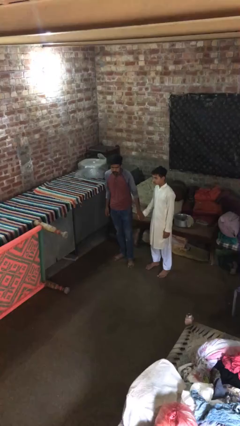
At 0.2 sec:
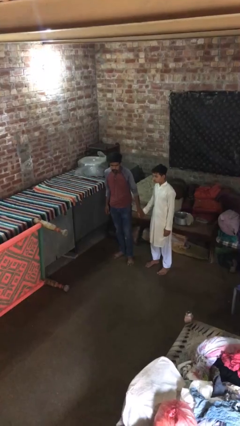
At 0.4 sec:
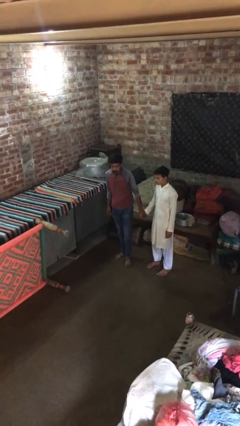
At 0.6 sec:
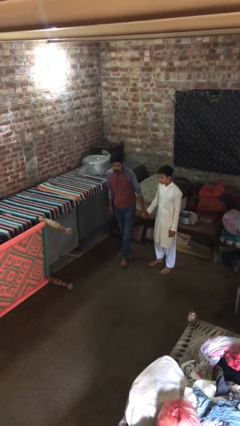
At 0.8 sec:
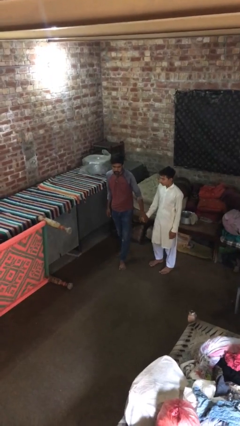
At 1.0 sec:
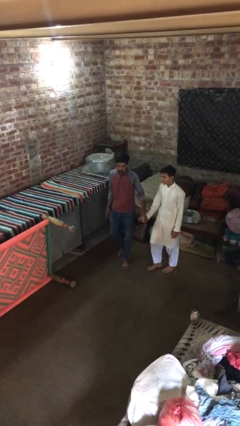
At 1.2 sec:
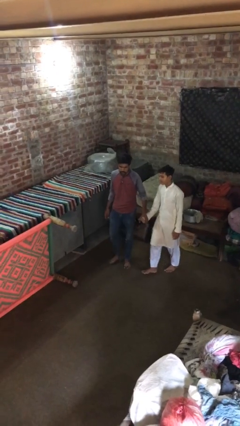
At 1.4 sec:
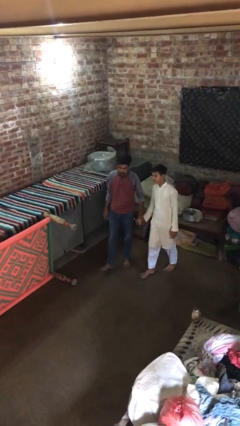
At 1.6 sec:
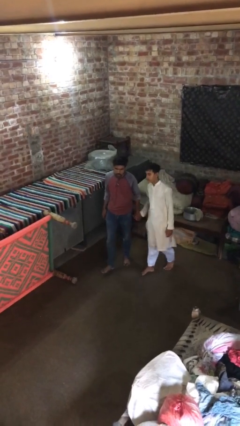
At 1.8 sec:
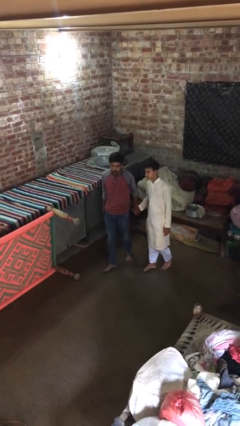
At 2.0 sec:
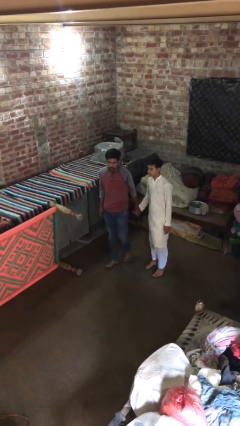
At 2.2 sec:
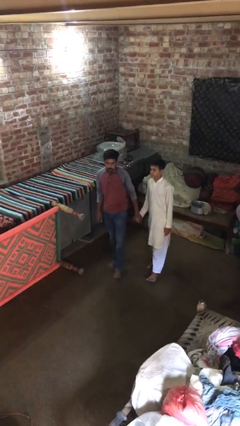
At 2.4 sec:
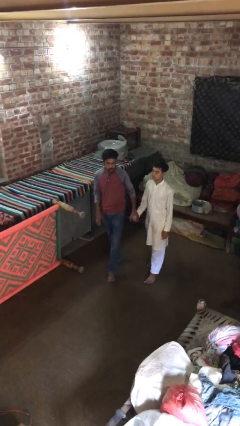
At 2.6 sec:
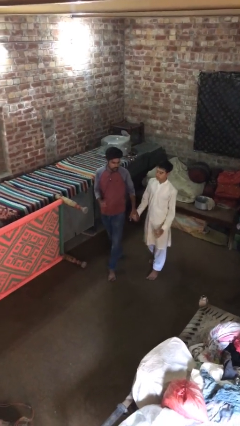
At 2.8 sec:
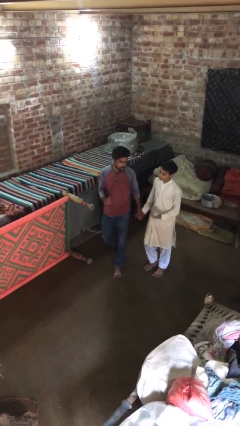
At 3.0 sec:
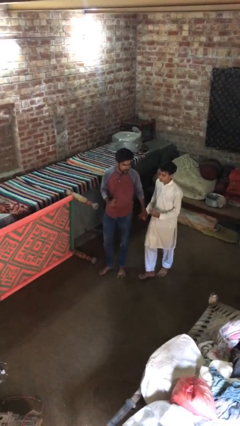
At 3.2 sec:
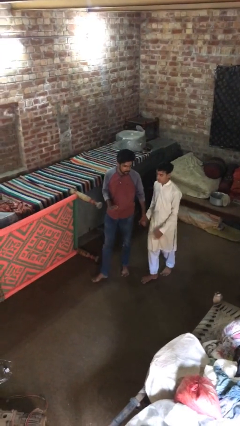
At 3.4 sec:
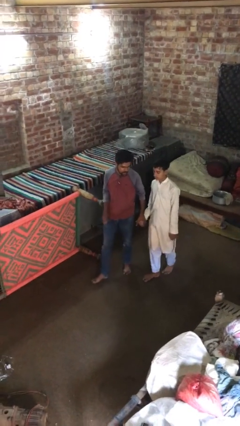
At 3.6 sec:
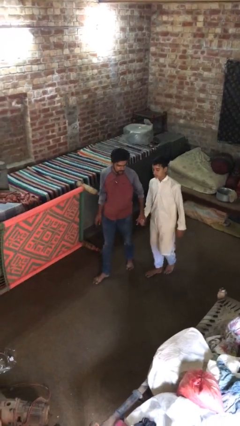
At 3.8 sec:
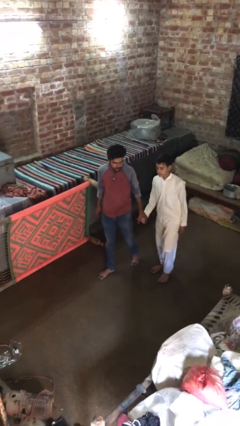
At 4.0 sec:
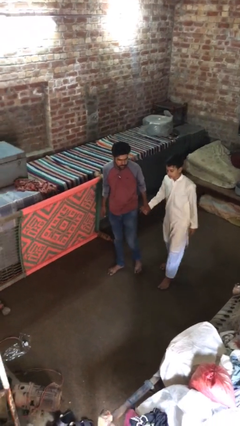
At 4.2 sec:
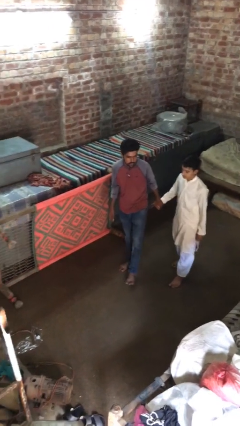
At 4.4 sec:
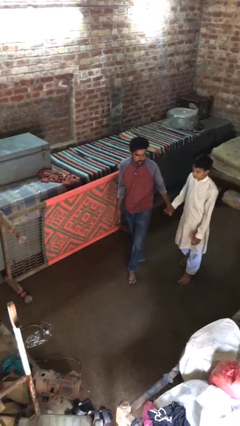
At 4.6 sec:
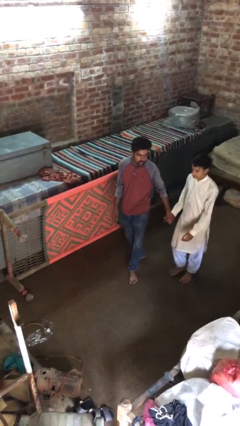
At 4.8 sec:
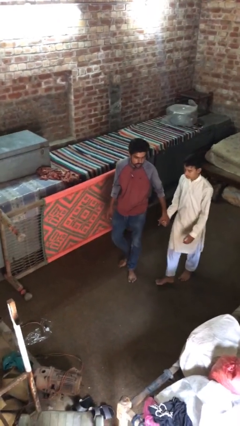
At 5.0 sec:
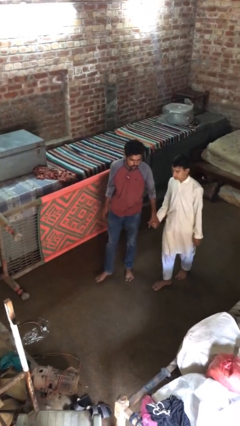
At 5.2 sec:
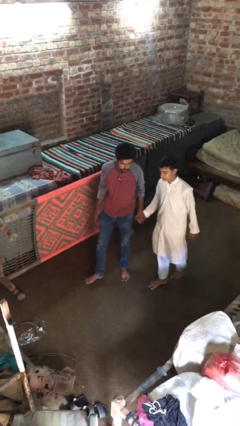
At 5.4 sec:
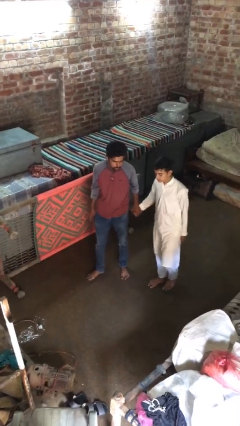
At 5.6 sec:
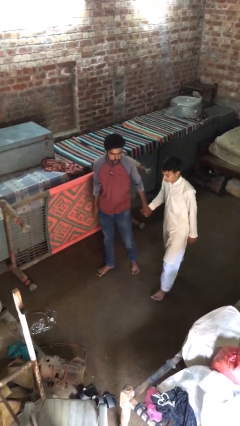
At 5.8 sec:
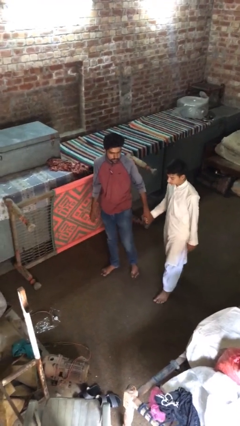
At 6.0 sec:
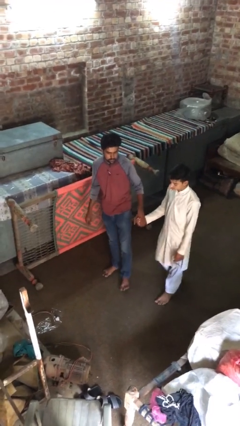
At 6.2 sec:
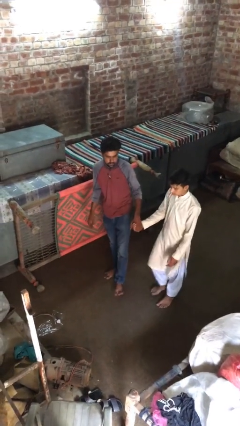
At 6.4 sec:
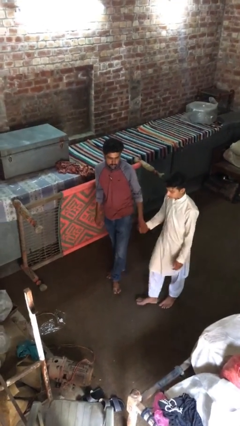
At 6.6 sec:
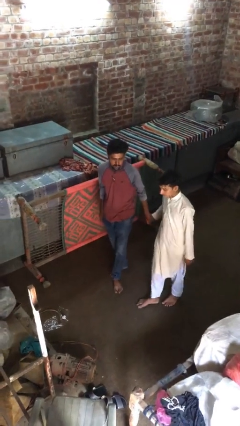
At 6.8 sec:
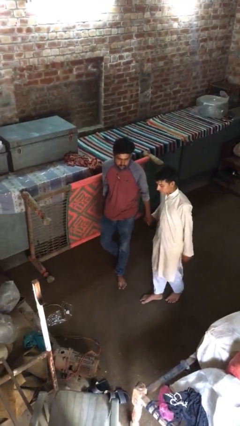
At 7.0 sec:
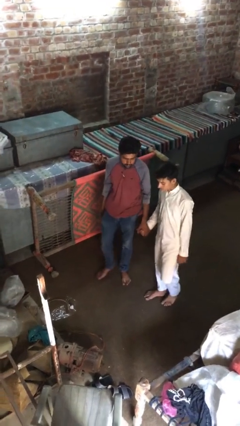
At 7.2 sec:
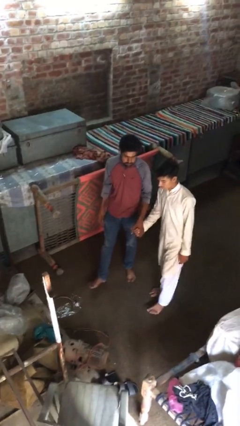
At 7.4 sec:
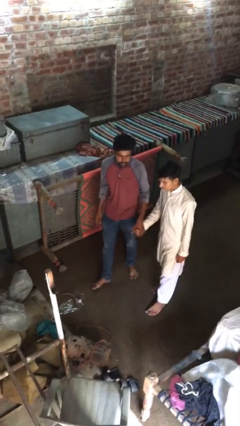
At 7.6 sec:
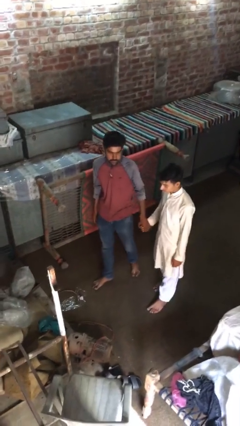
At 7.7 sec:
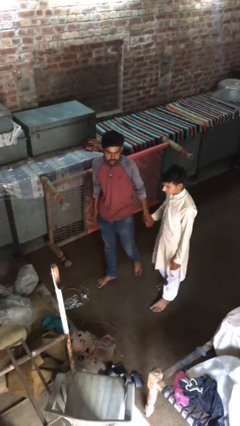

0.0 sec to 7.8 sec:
person holds hand

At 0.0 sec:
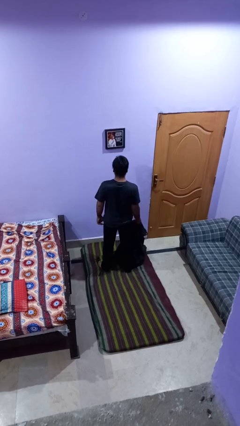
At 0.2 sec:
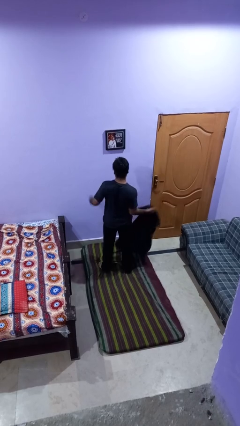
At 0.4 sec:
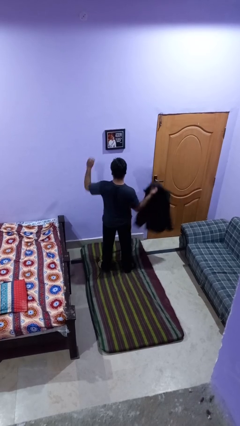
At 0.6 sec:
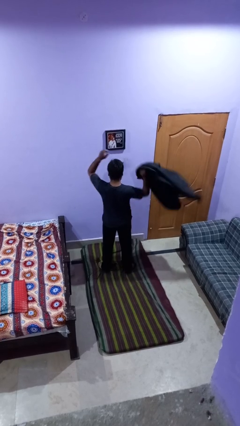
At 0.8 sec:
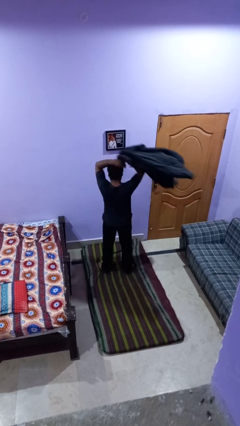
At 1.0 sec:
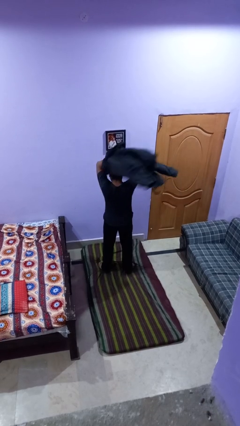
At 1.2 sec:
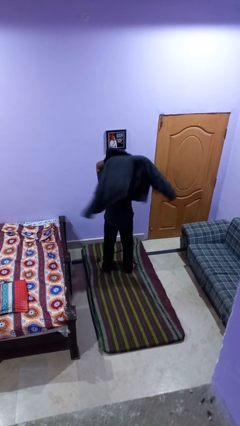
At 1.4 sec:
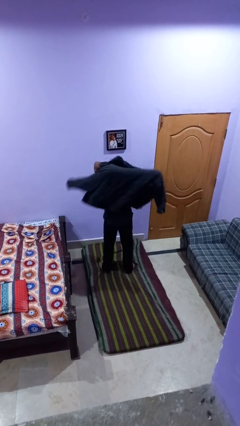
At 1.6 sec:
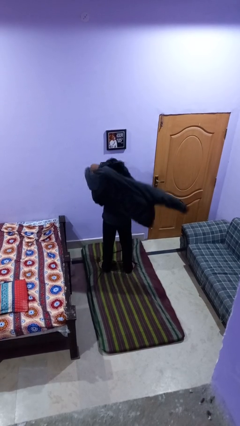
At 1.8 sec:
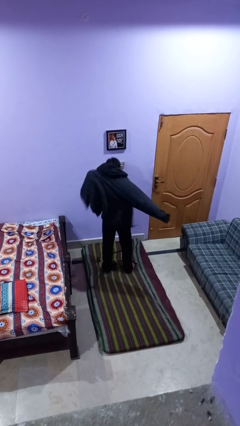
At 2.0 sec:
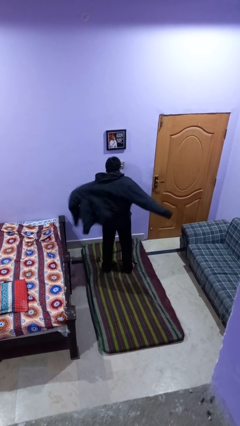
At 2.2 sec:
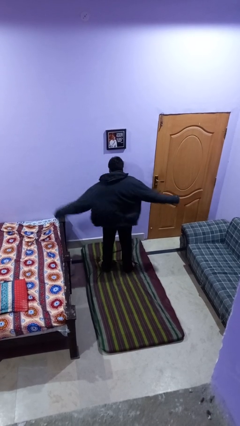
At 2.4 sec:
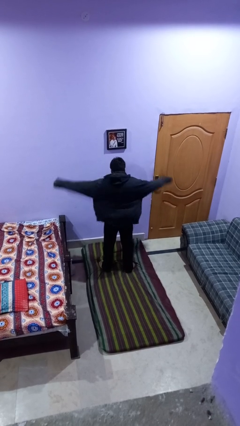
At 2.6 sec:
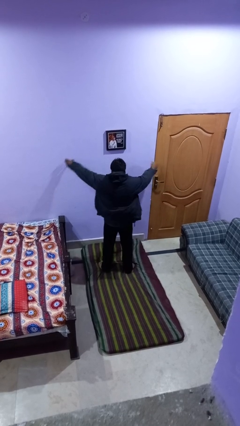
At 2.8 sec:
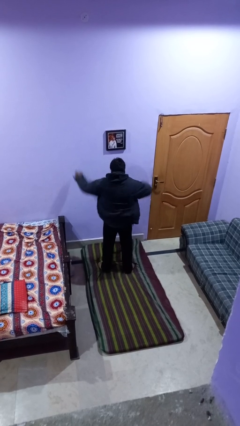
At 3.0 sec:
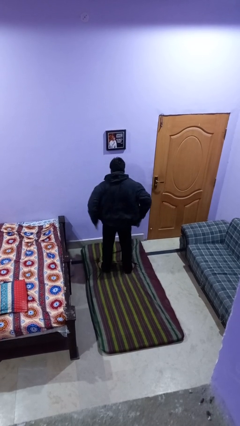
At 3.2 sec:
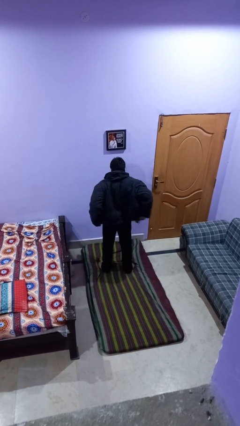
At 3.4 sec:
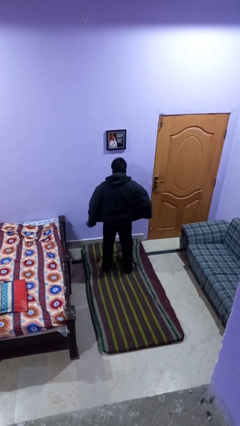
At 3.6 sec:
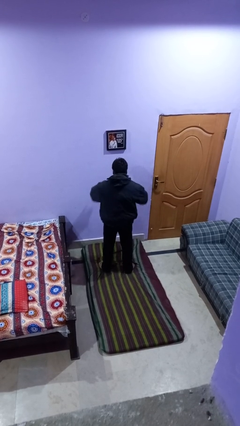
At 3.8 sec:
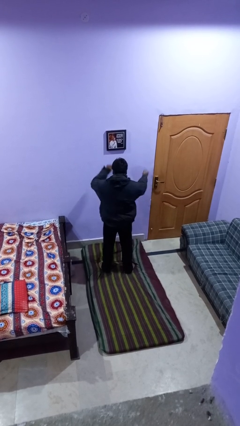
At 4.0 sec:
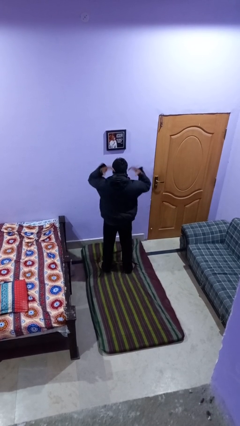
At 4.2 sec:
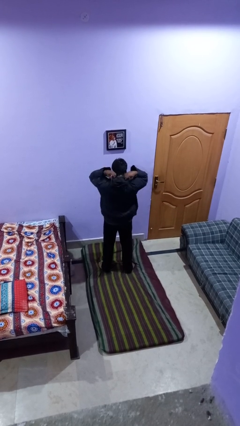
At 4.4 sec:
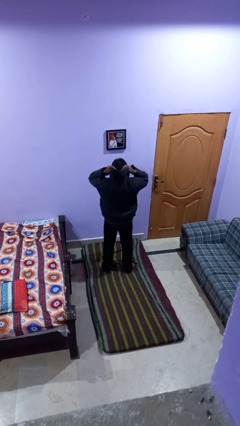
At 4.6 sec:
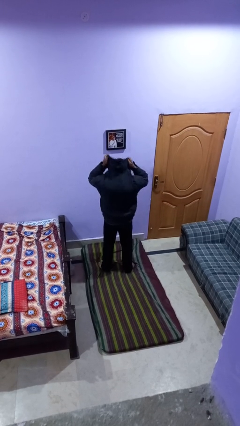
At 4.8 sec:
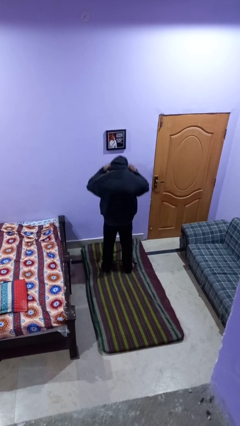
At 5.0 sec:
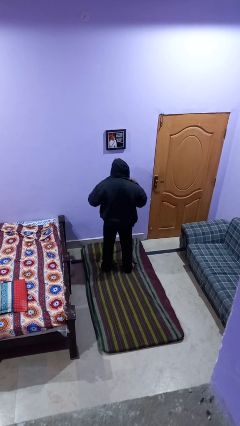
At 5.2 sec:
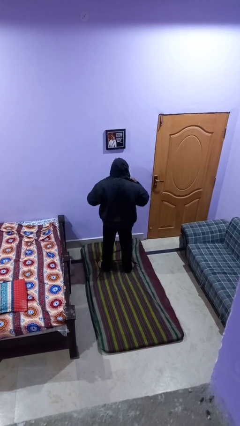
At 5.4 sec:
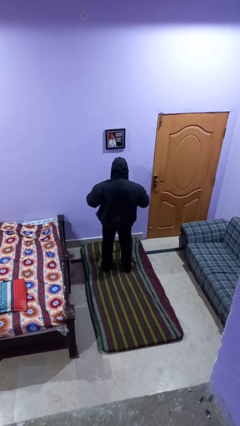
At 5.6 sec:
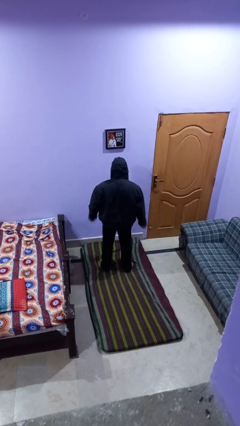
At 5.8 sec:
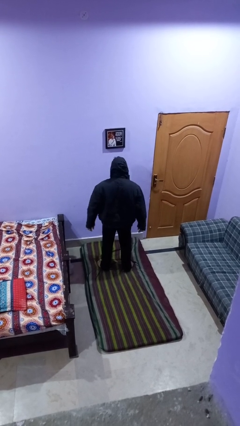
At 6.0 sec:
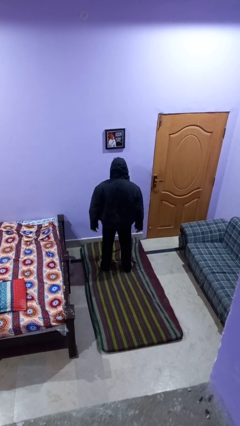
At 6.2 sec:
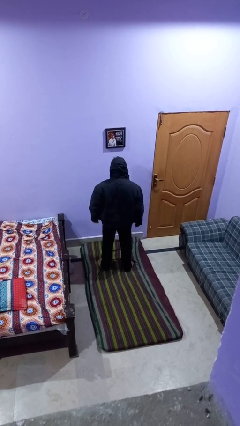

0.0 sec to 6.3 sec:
person puts on hoodie

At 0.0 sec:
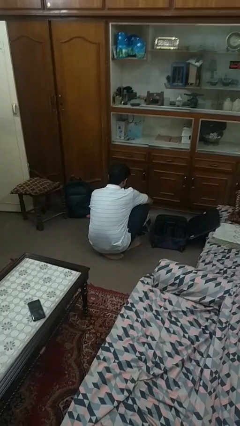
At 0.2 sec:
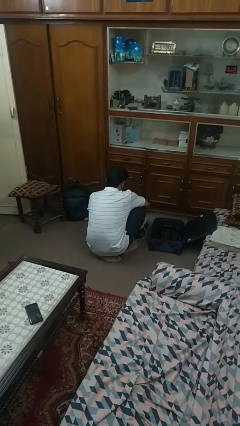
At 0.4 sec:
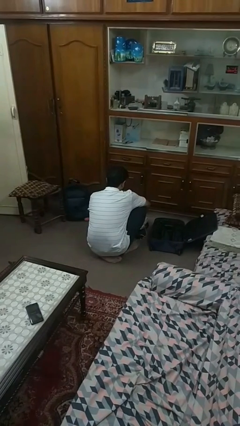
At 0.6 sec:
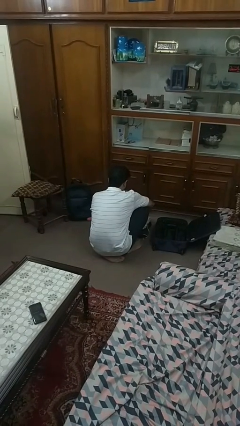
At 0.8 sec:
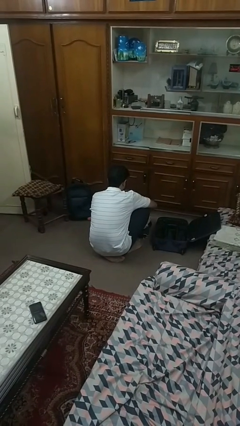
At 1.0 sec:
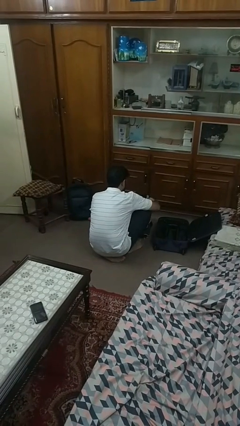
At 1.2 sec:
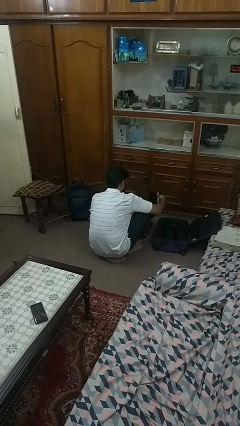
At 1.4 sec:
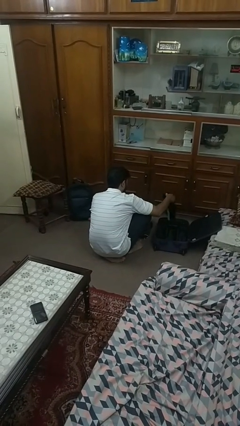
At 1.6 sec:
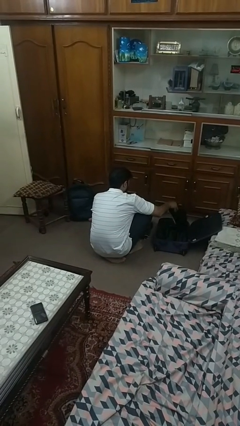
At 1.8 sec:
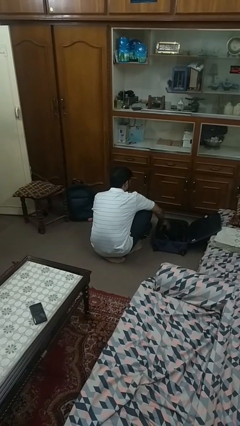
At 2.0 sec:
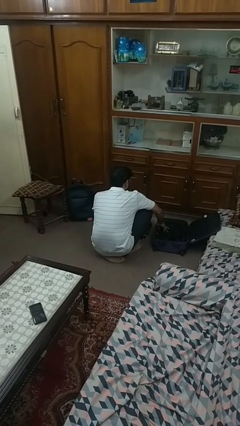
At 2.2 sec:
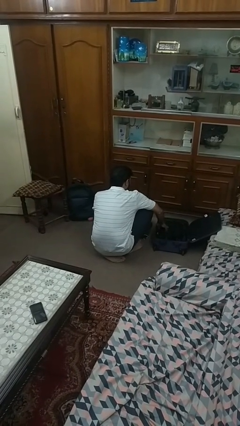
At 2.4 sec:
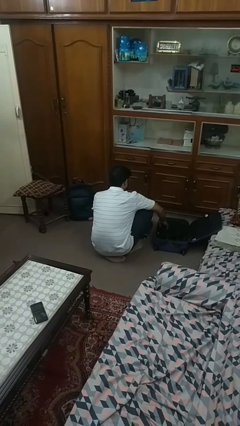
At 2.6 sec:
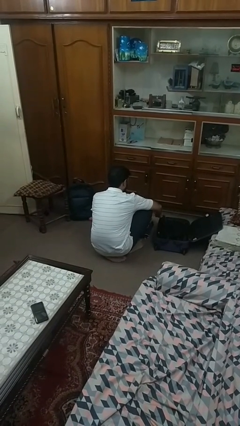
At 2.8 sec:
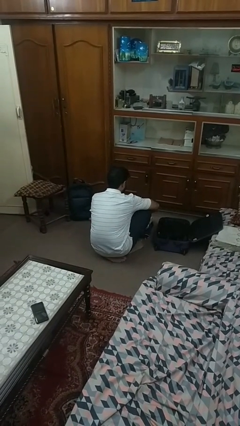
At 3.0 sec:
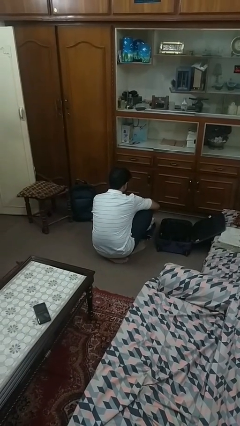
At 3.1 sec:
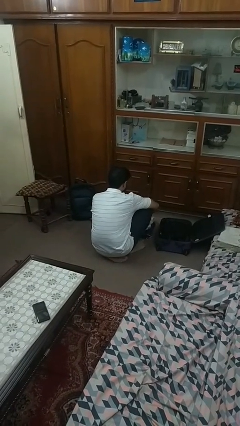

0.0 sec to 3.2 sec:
person loads clothes into suitcase

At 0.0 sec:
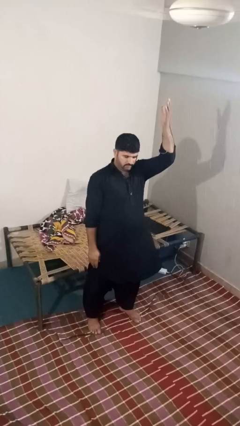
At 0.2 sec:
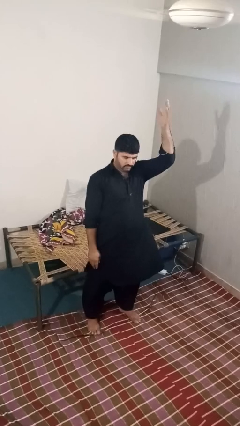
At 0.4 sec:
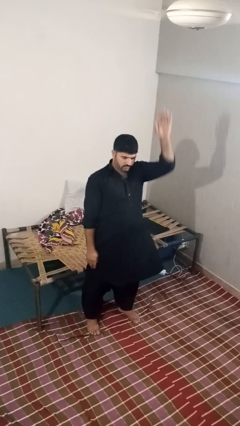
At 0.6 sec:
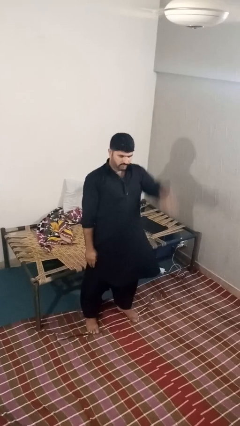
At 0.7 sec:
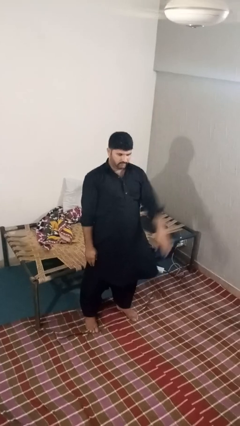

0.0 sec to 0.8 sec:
person gestures swipe down
